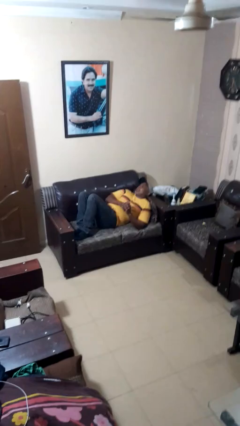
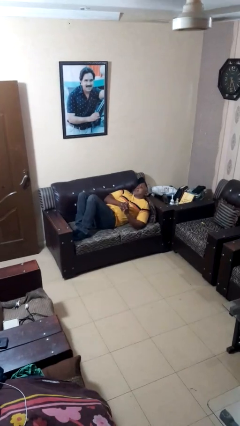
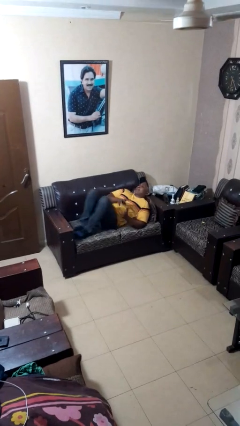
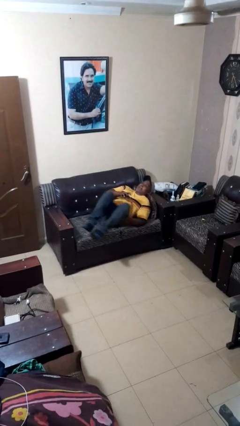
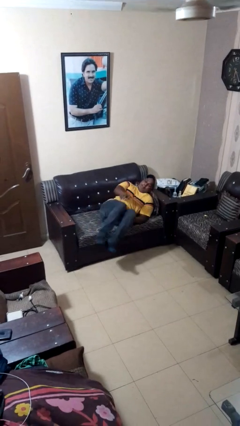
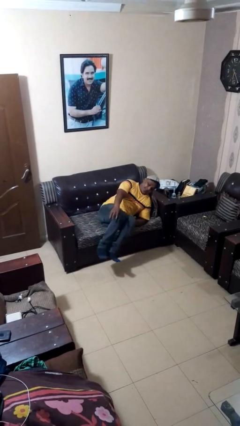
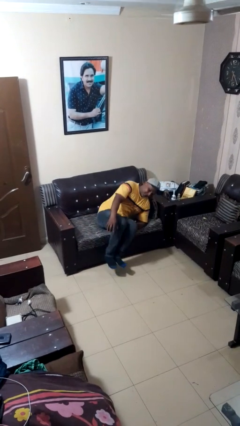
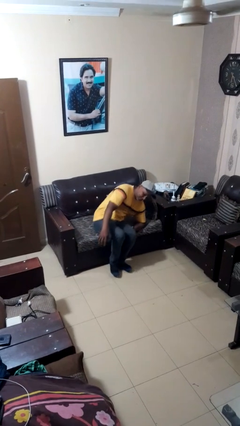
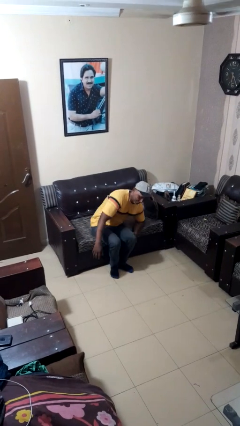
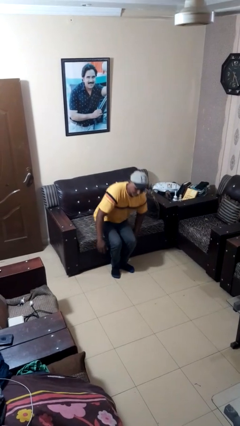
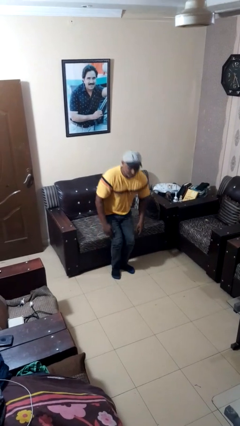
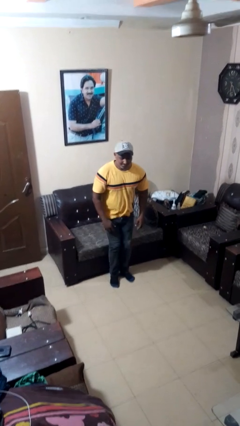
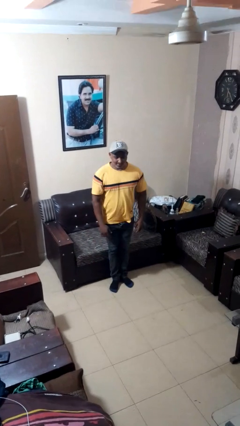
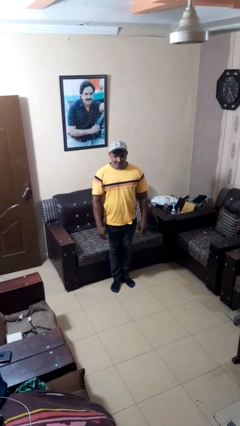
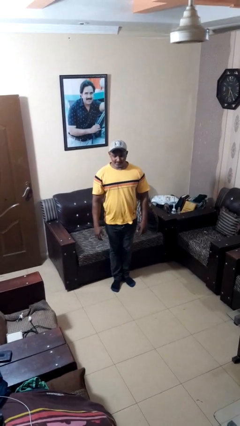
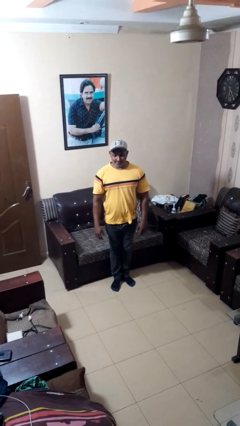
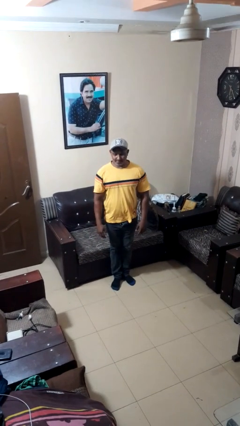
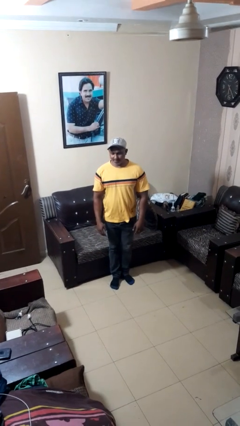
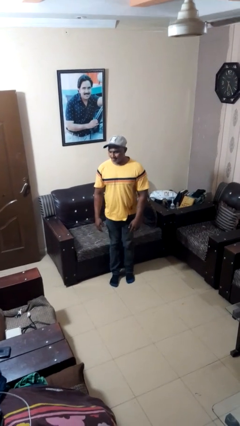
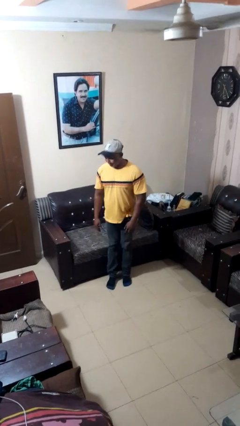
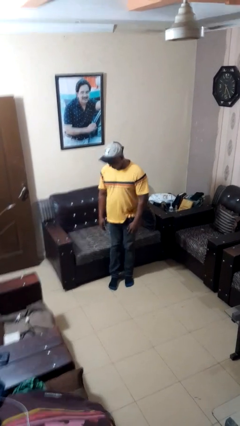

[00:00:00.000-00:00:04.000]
person stands up

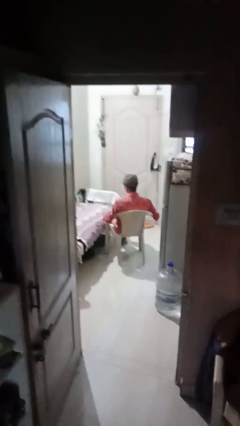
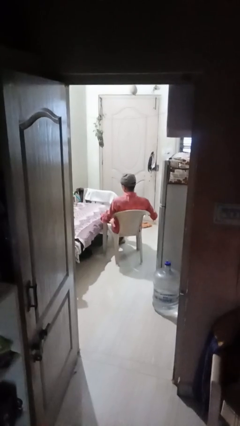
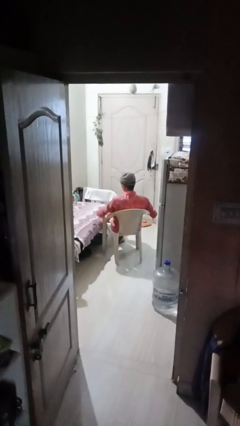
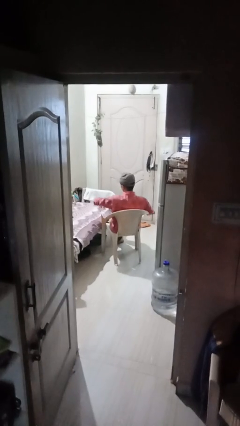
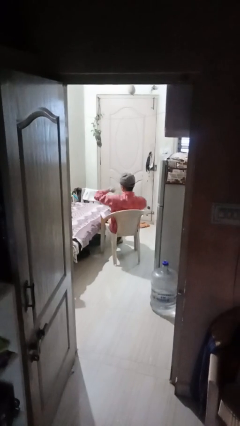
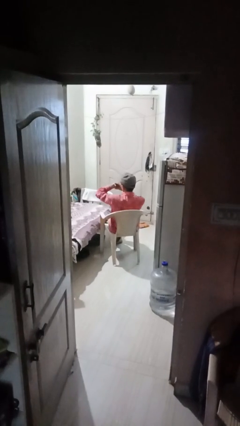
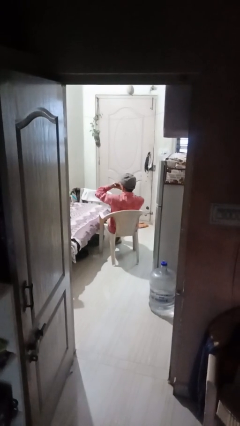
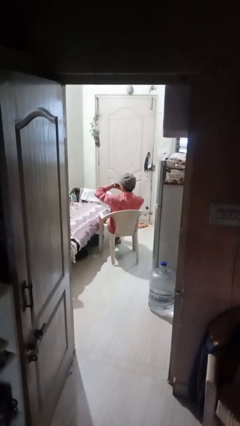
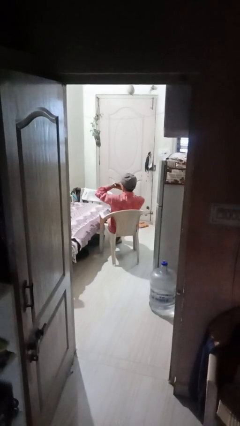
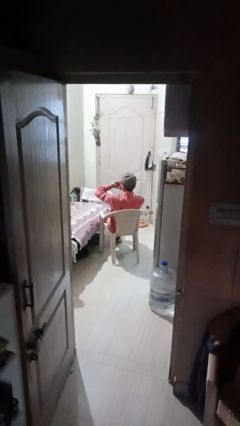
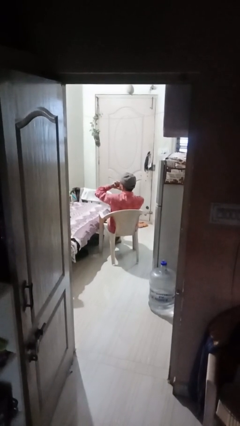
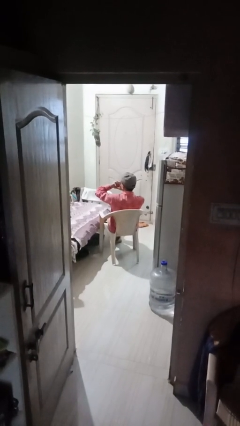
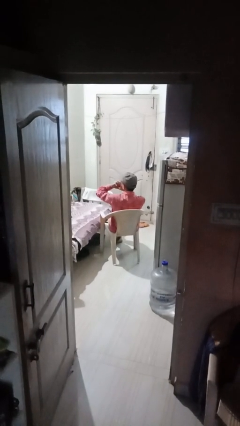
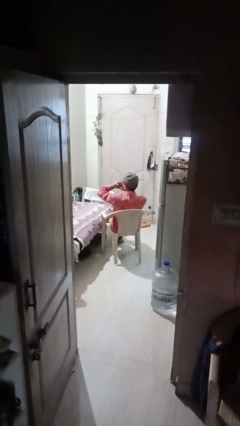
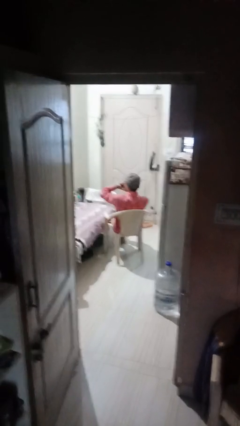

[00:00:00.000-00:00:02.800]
person looks at wristwatch

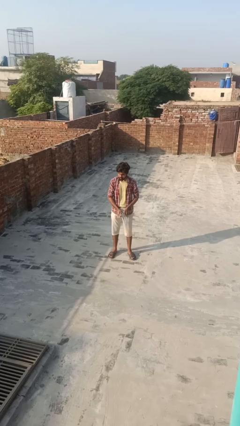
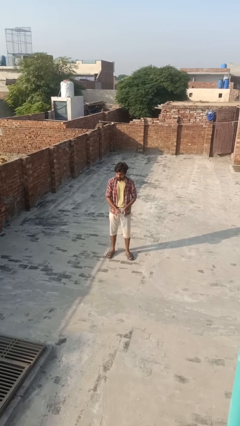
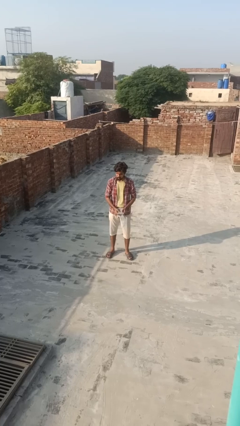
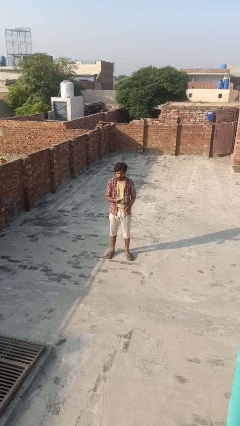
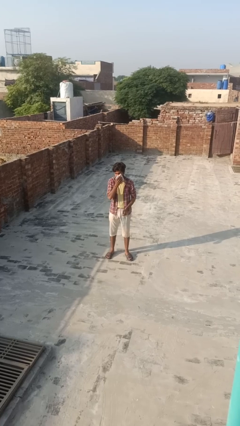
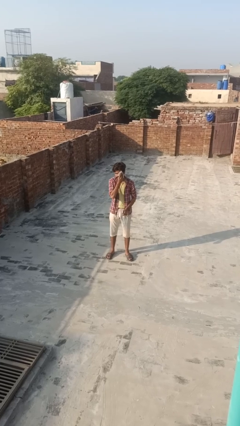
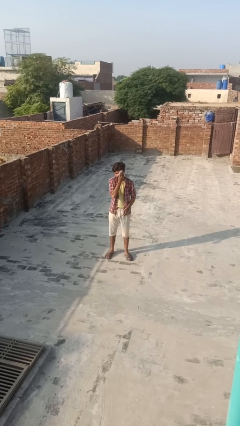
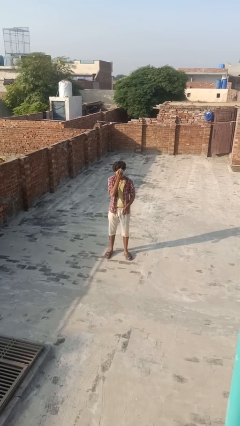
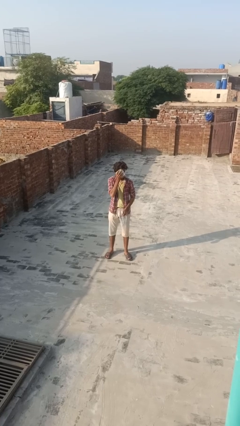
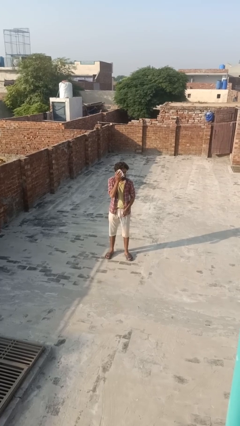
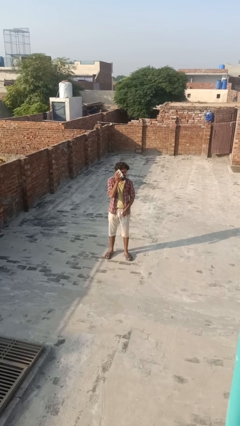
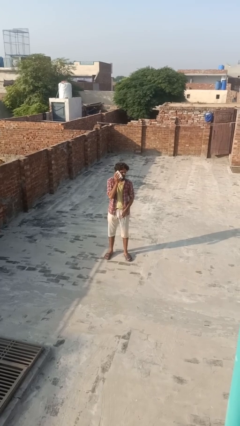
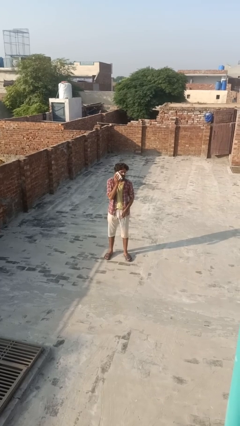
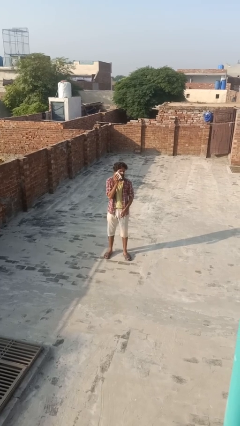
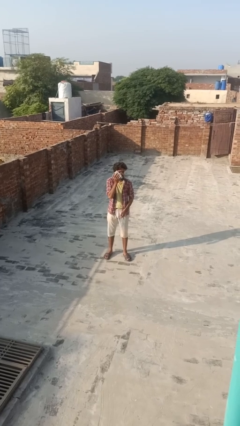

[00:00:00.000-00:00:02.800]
person wipes mouth with napkin

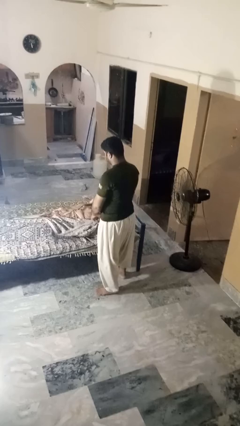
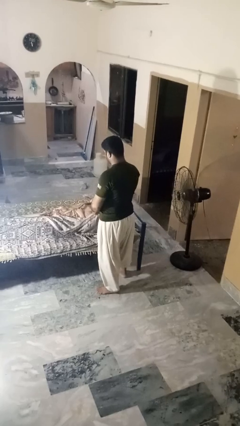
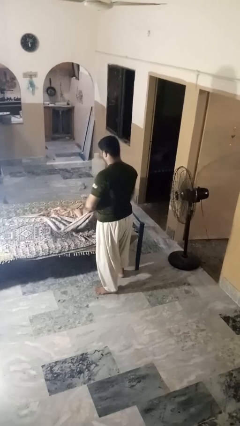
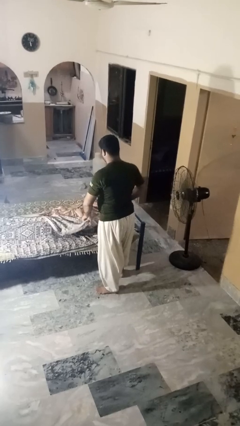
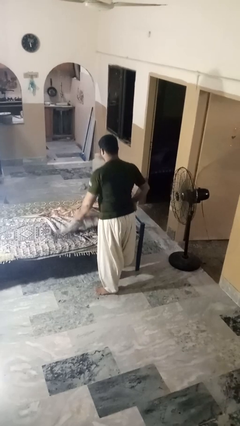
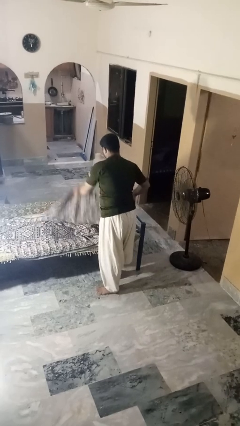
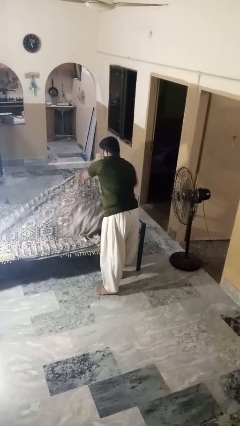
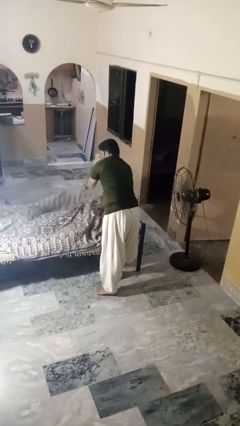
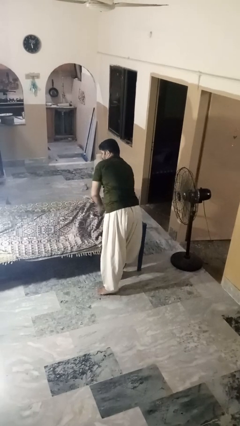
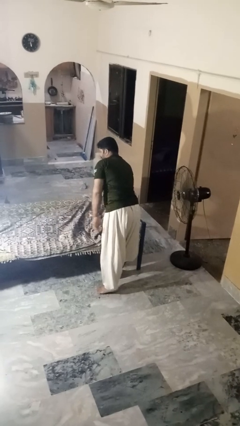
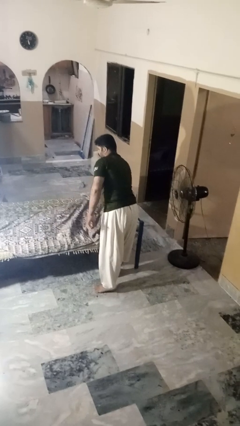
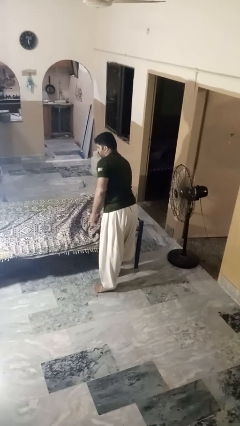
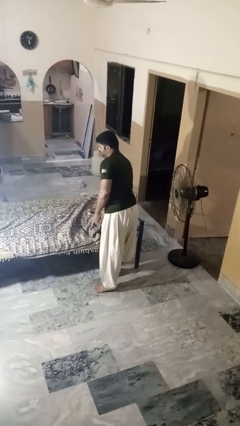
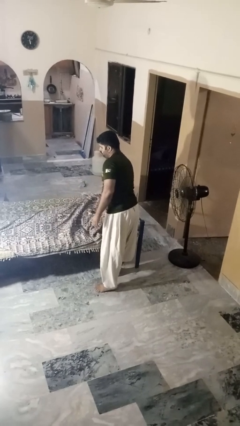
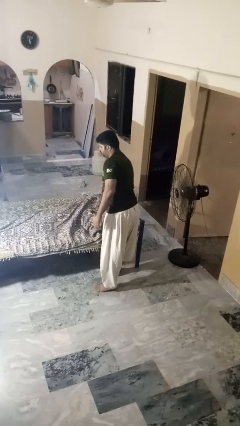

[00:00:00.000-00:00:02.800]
person covers friend with blanket

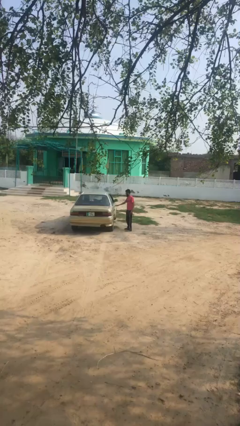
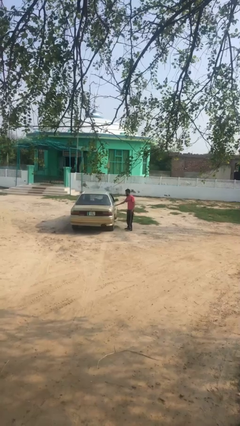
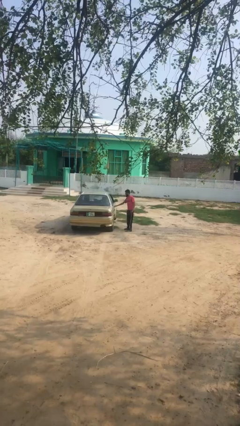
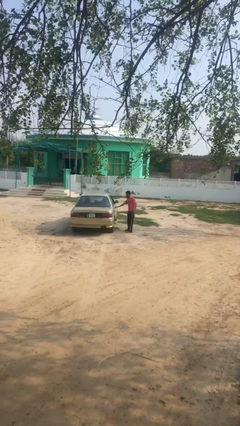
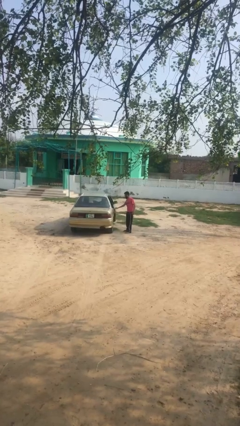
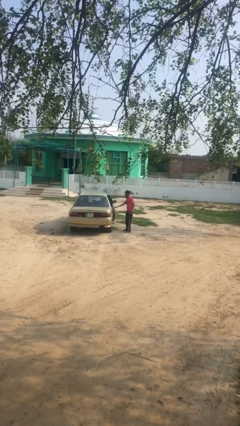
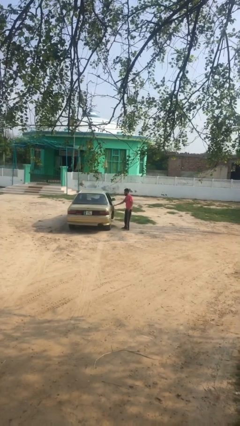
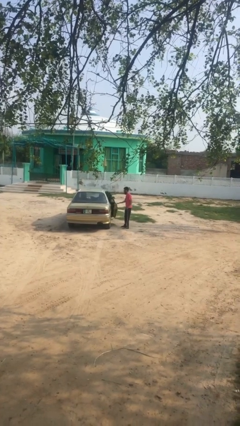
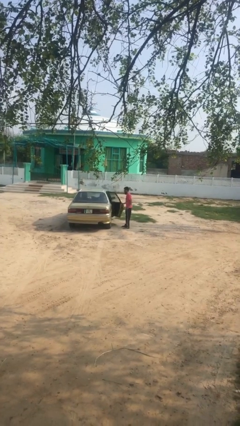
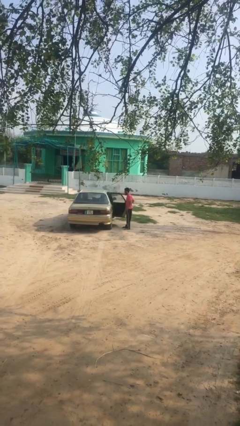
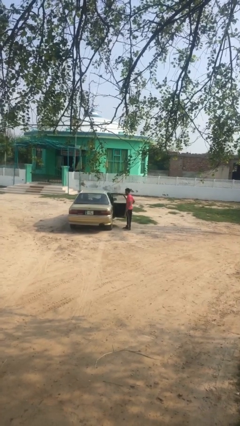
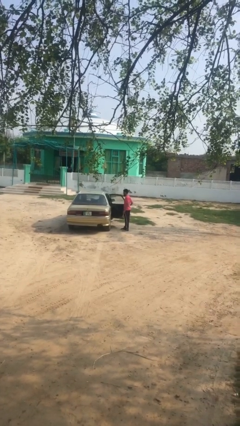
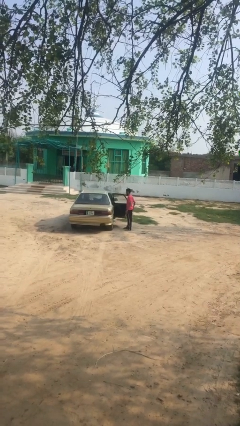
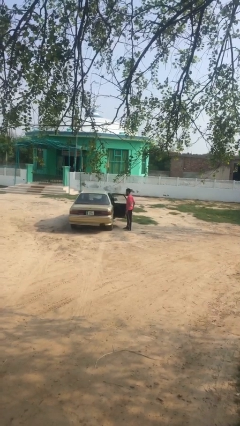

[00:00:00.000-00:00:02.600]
person opens car door

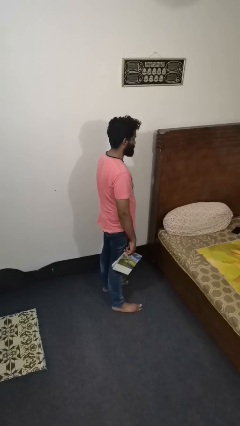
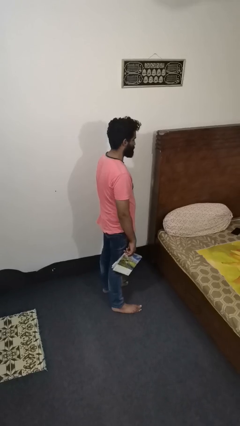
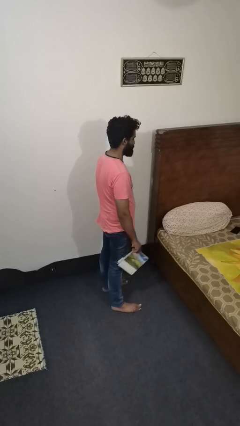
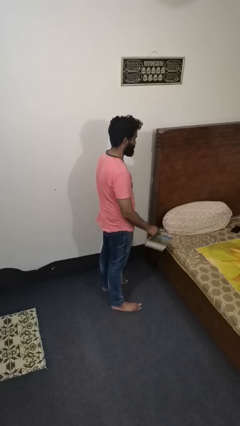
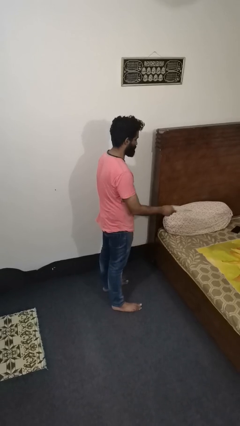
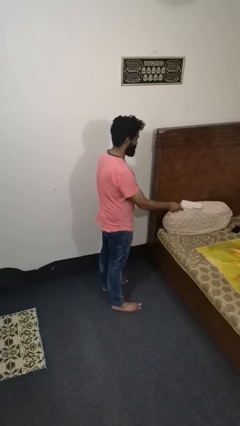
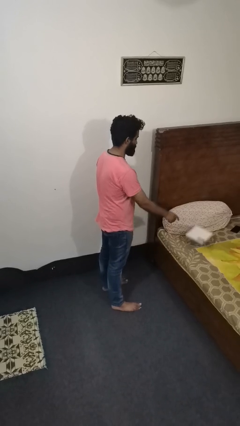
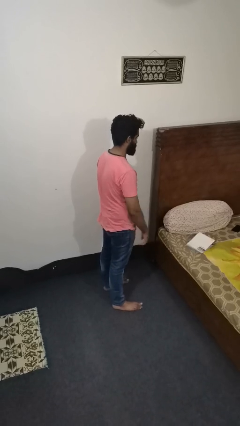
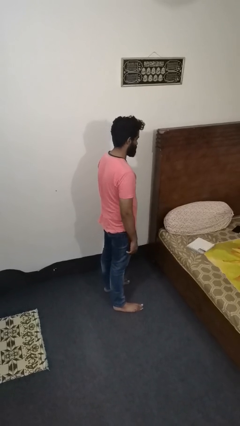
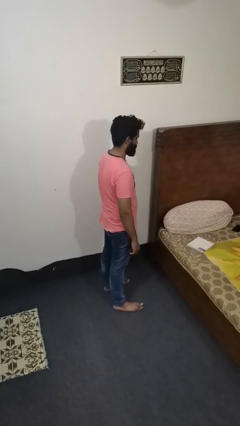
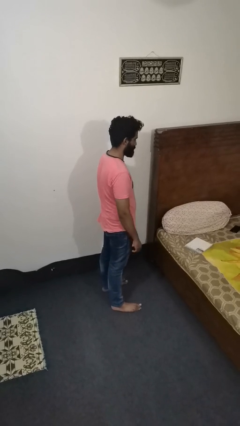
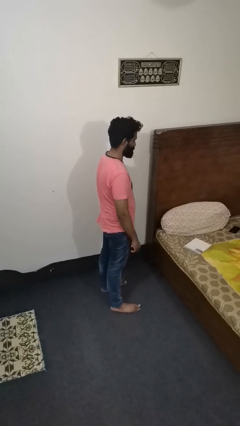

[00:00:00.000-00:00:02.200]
person throws object on bed
